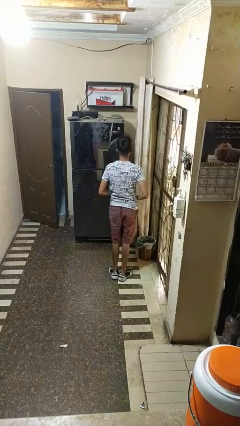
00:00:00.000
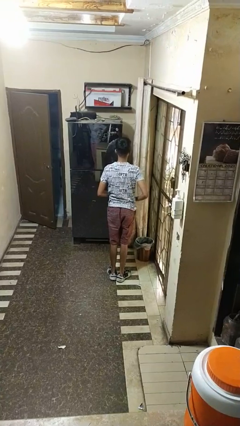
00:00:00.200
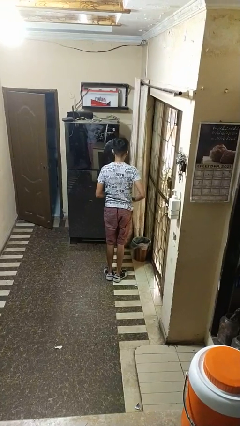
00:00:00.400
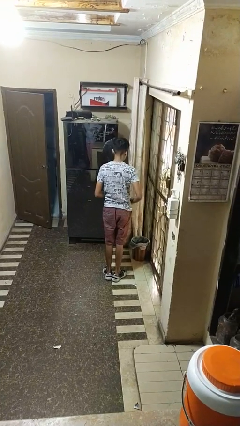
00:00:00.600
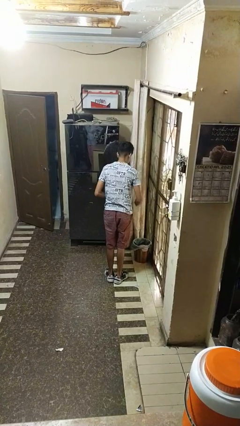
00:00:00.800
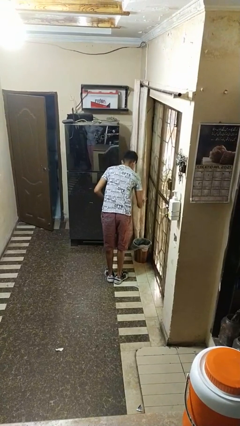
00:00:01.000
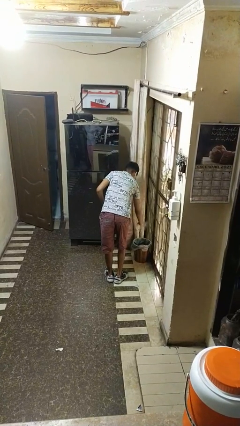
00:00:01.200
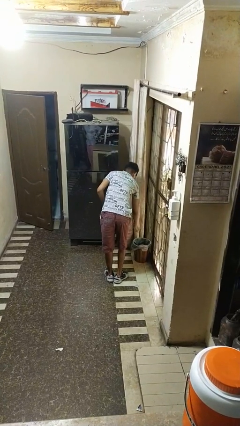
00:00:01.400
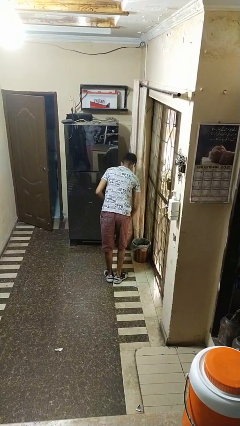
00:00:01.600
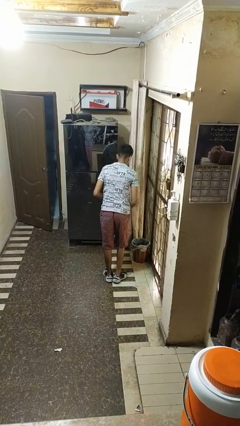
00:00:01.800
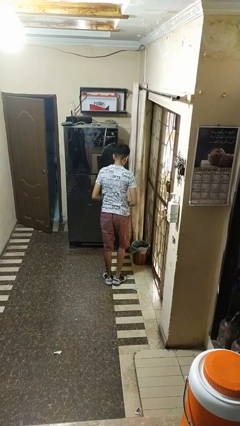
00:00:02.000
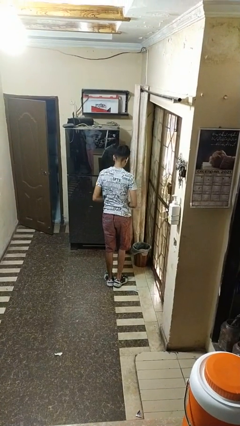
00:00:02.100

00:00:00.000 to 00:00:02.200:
person discards trash

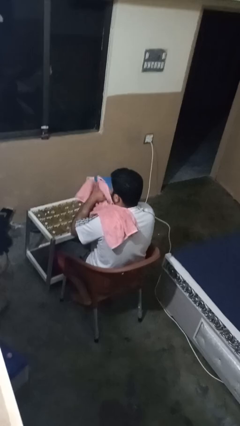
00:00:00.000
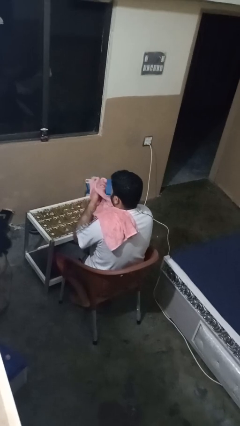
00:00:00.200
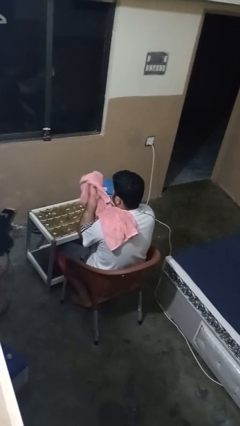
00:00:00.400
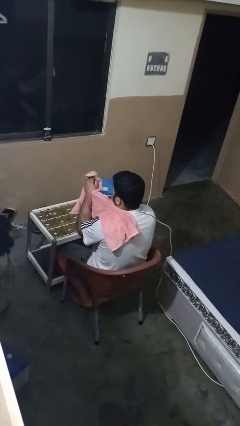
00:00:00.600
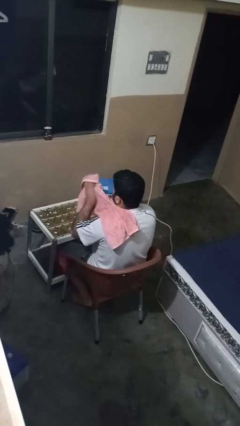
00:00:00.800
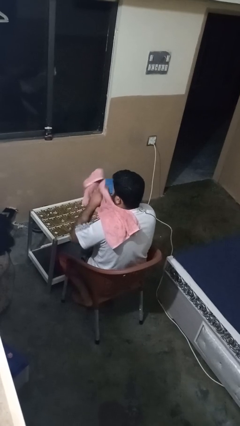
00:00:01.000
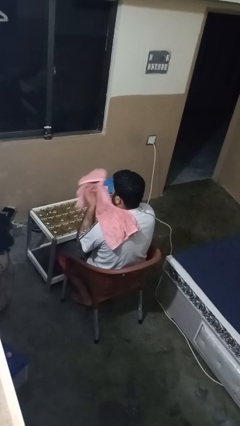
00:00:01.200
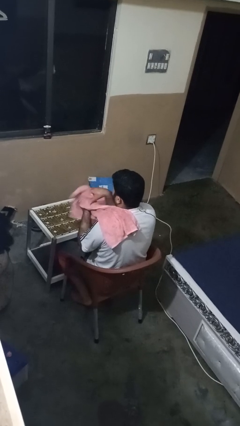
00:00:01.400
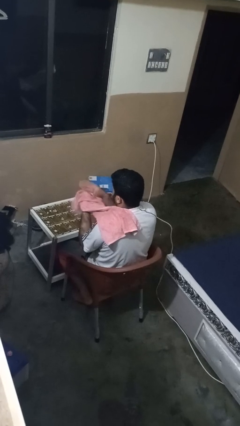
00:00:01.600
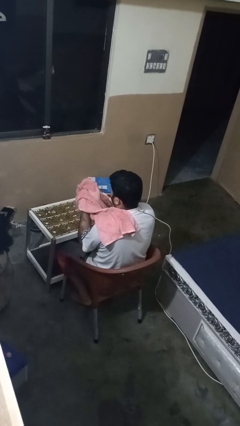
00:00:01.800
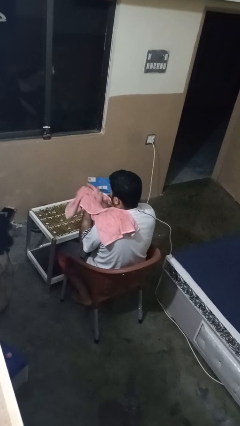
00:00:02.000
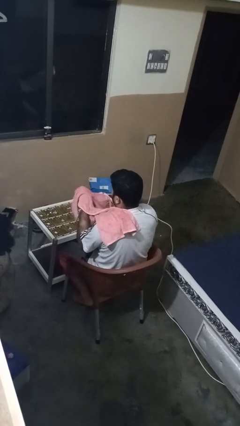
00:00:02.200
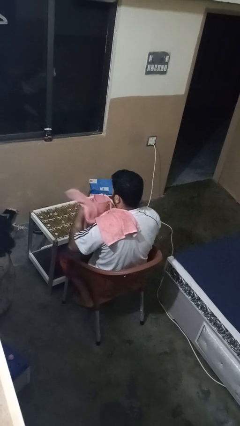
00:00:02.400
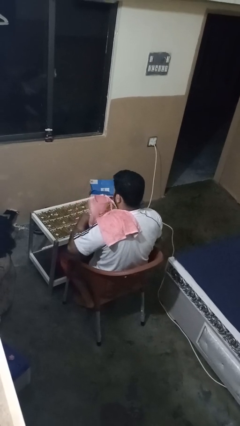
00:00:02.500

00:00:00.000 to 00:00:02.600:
person dries hands with towel

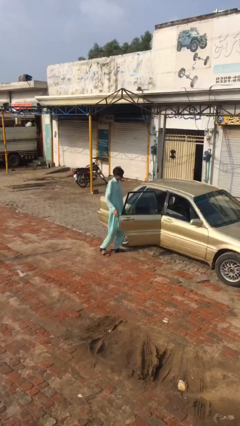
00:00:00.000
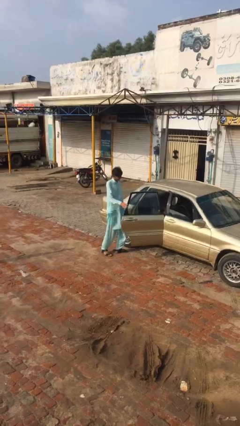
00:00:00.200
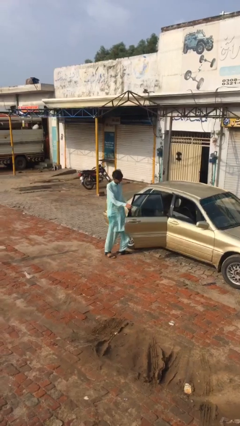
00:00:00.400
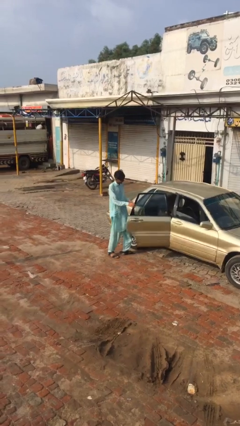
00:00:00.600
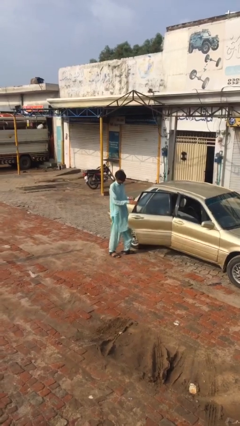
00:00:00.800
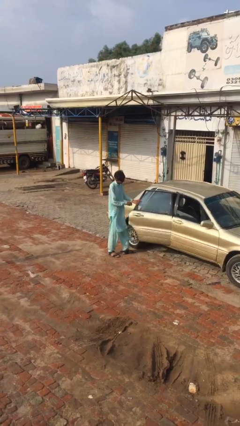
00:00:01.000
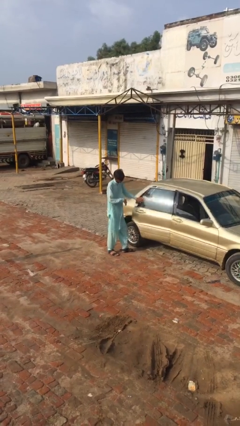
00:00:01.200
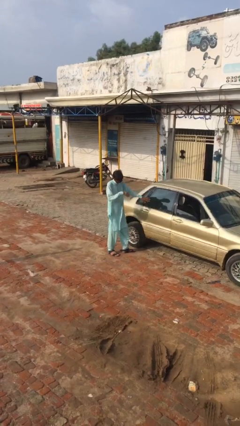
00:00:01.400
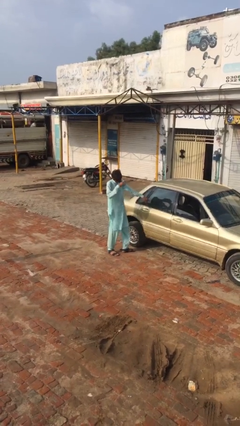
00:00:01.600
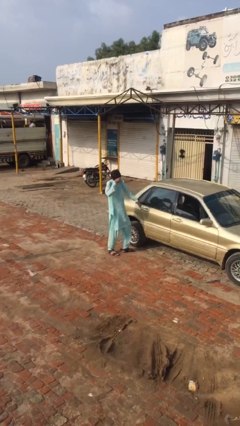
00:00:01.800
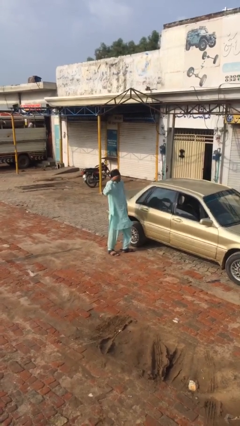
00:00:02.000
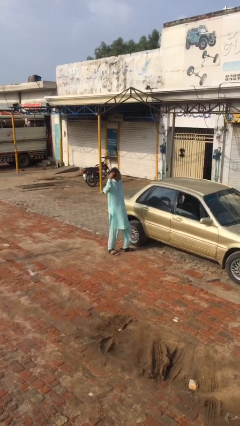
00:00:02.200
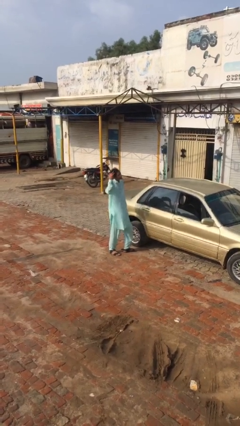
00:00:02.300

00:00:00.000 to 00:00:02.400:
person closes car door

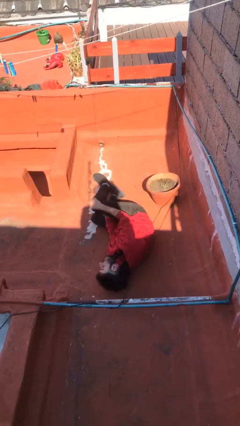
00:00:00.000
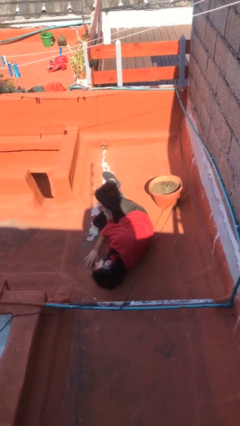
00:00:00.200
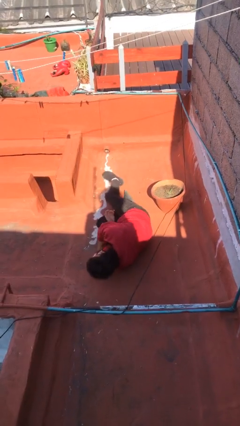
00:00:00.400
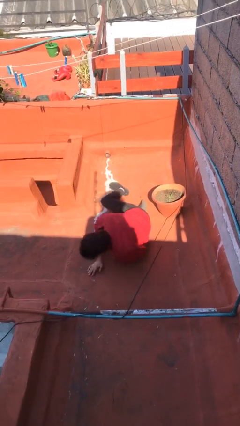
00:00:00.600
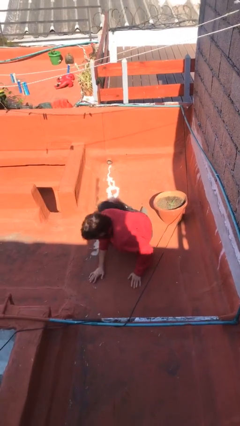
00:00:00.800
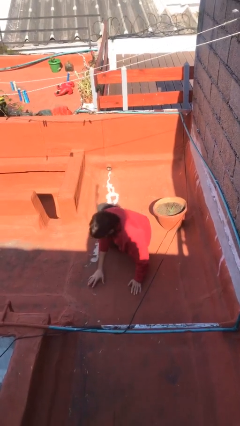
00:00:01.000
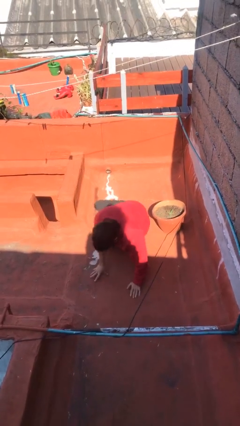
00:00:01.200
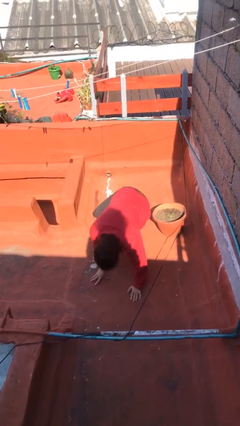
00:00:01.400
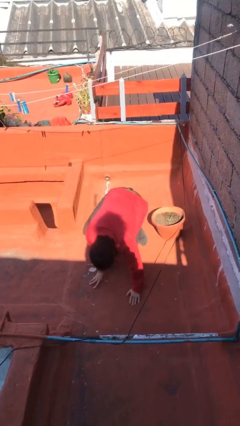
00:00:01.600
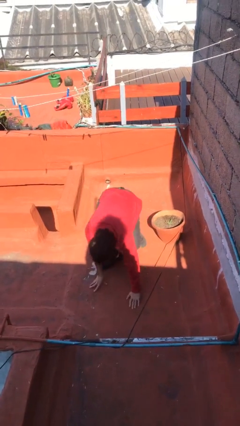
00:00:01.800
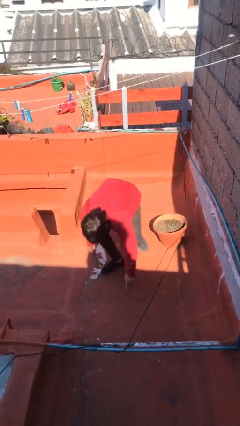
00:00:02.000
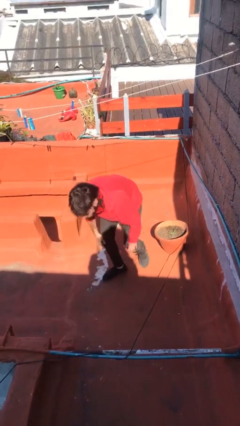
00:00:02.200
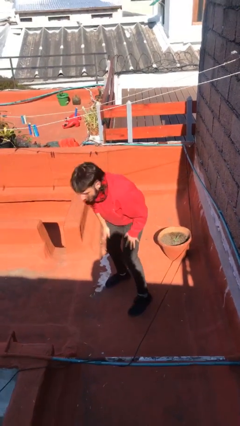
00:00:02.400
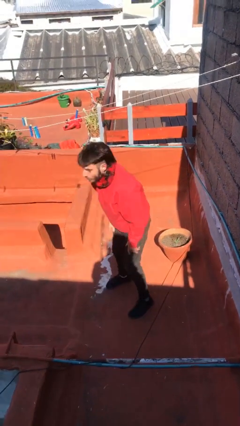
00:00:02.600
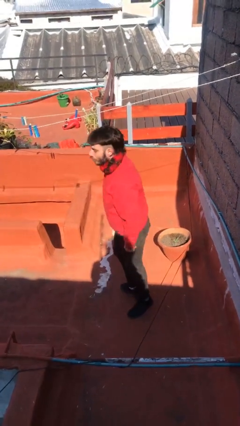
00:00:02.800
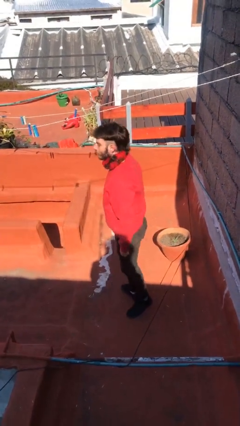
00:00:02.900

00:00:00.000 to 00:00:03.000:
person stands up from floor

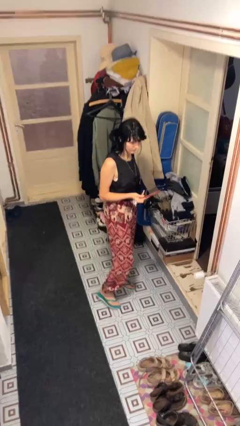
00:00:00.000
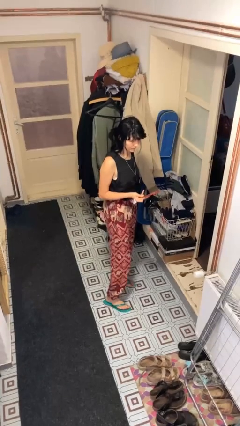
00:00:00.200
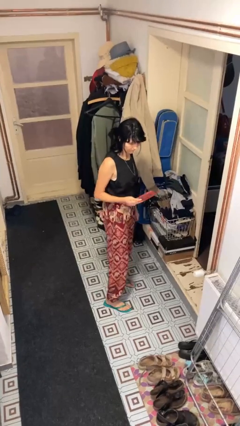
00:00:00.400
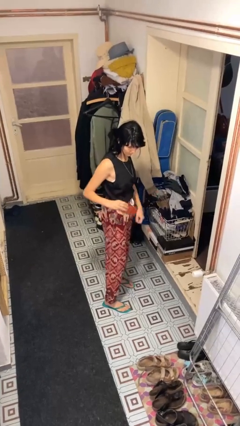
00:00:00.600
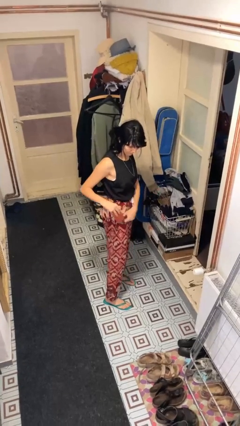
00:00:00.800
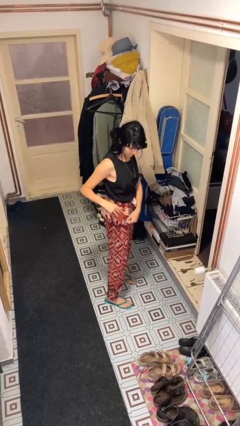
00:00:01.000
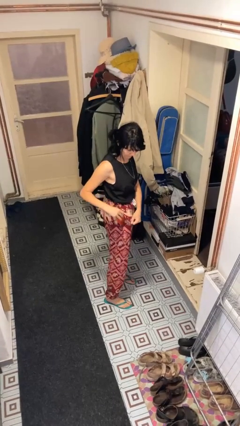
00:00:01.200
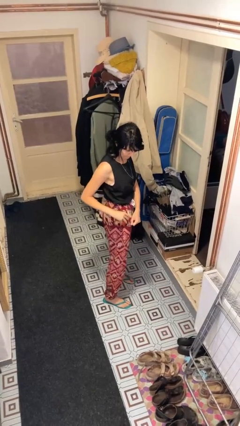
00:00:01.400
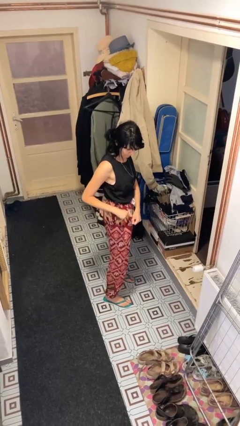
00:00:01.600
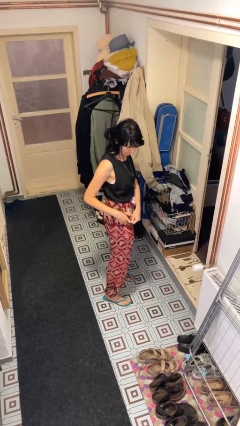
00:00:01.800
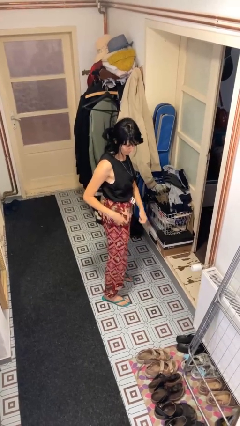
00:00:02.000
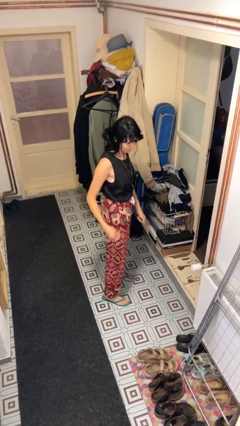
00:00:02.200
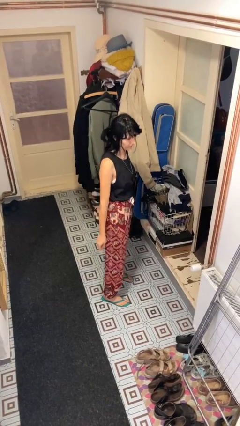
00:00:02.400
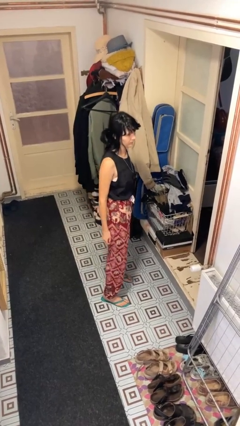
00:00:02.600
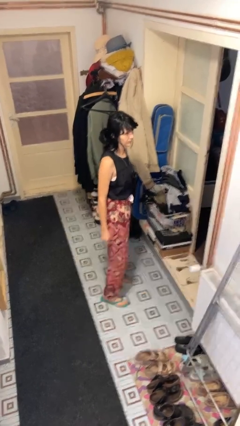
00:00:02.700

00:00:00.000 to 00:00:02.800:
person puts phone into pocket

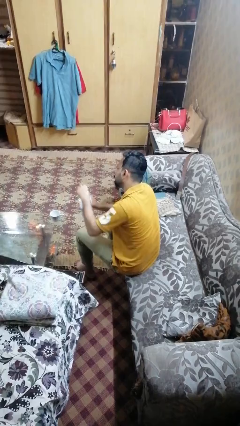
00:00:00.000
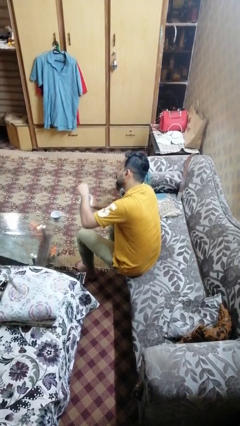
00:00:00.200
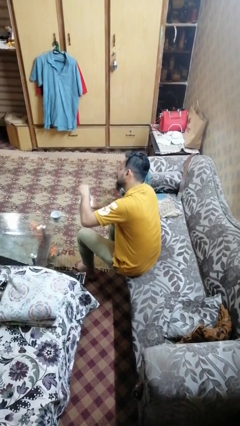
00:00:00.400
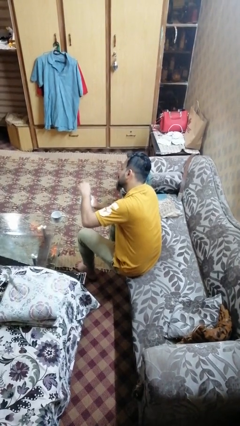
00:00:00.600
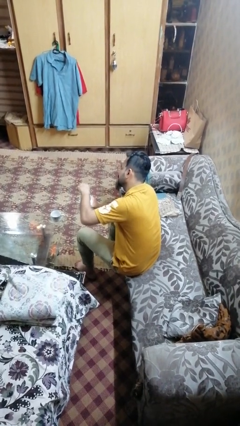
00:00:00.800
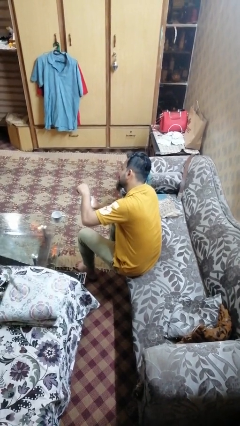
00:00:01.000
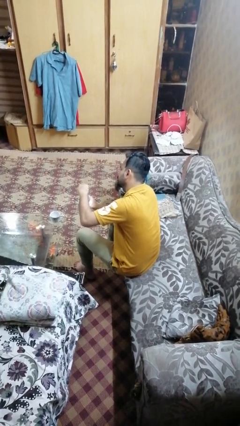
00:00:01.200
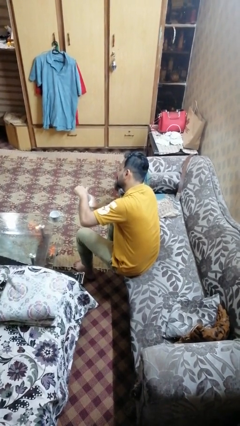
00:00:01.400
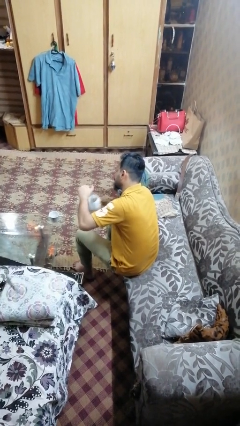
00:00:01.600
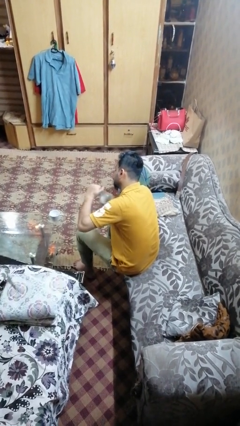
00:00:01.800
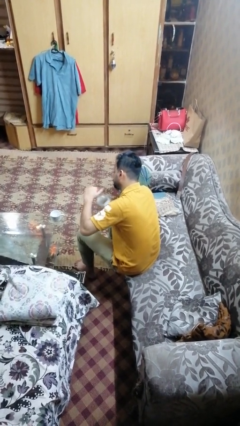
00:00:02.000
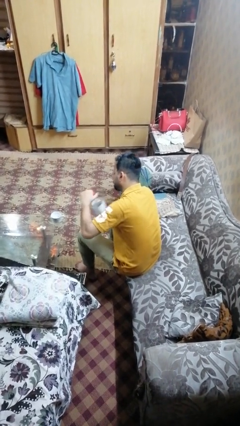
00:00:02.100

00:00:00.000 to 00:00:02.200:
person screws lid to bottle

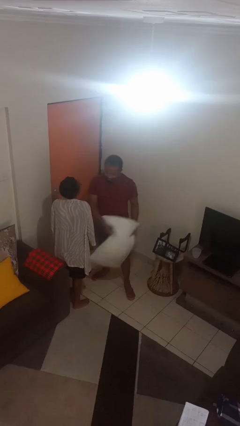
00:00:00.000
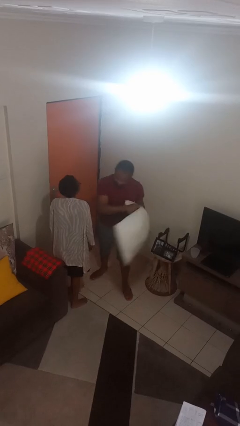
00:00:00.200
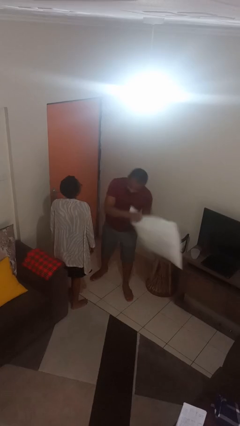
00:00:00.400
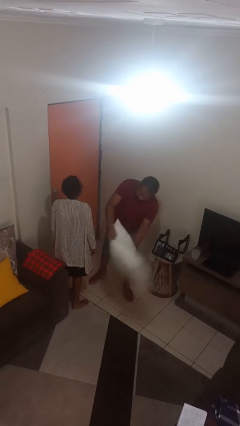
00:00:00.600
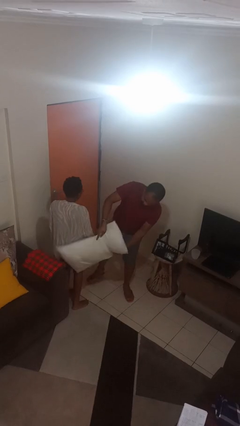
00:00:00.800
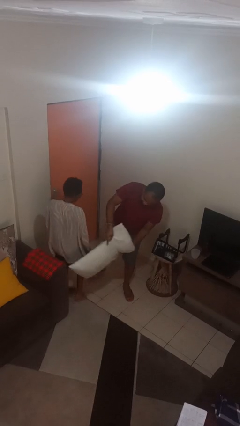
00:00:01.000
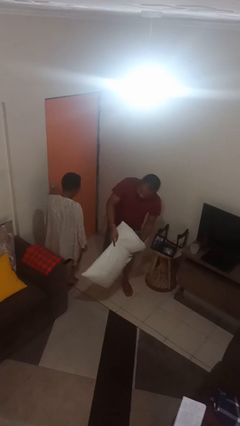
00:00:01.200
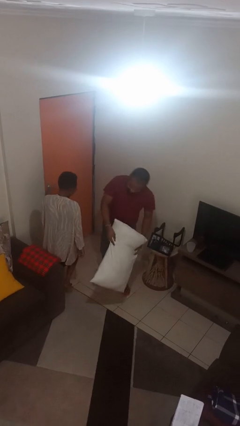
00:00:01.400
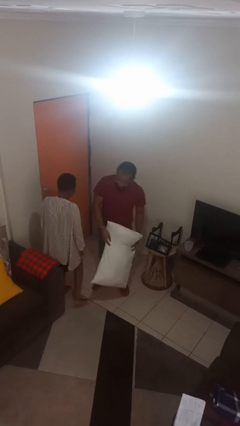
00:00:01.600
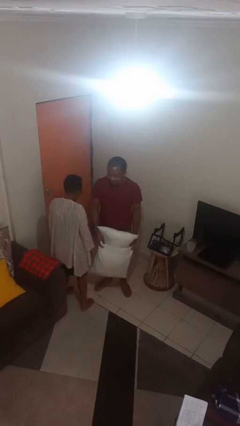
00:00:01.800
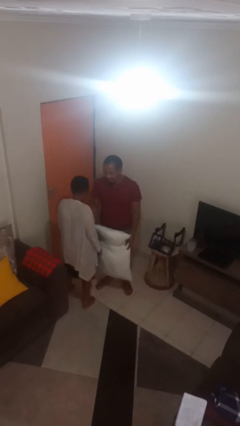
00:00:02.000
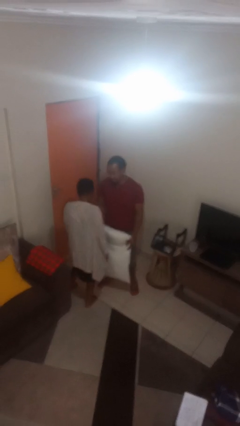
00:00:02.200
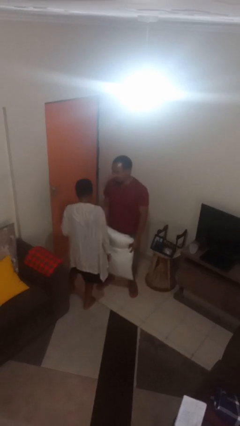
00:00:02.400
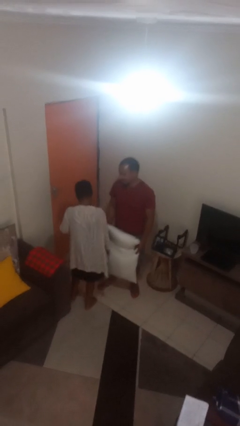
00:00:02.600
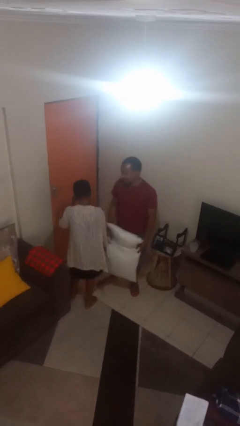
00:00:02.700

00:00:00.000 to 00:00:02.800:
person hits person with pillow
